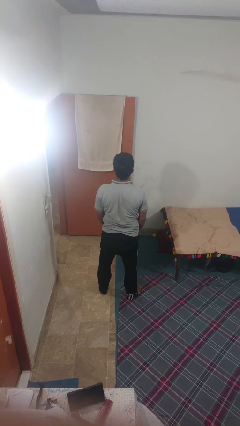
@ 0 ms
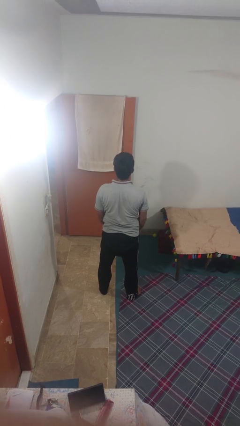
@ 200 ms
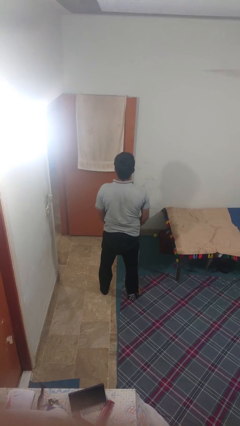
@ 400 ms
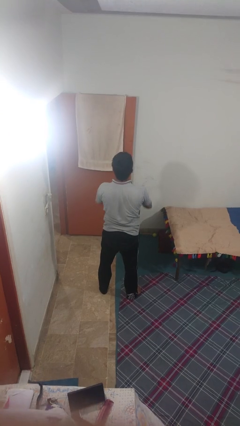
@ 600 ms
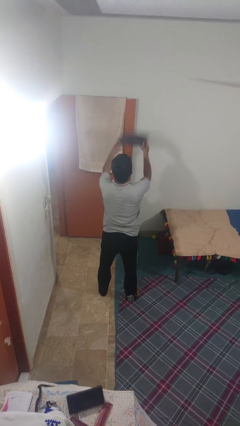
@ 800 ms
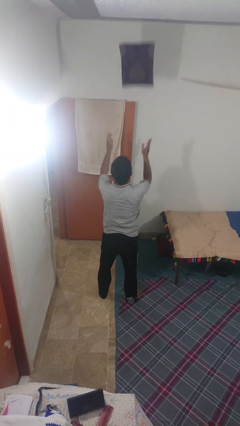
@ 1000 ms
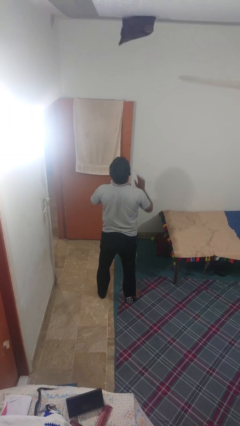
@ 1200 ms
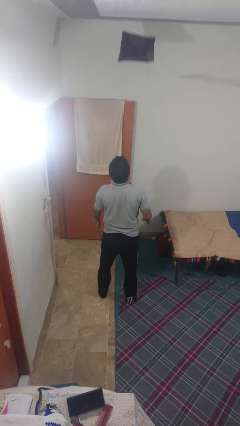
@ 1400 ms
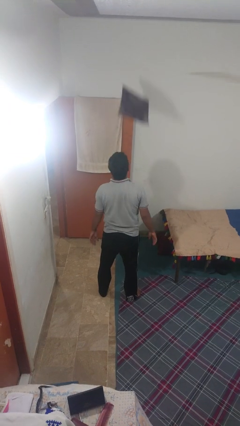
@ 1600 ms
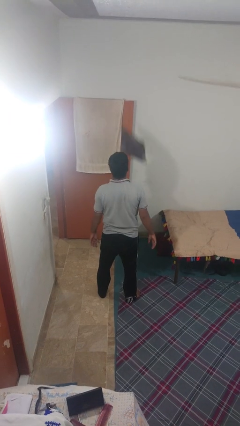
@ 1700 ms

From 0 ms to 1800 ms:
person throws object into air

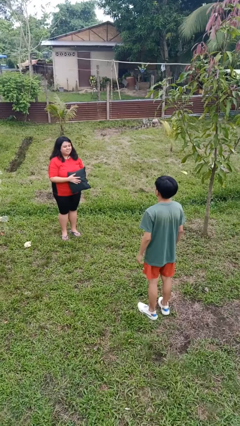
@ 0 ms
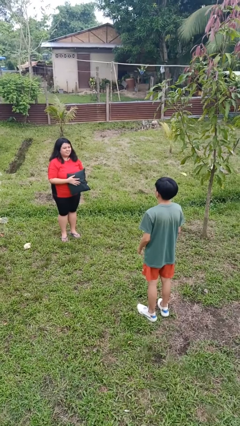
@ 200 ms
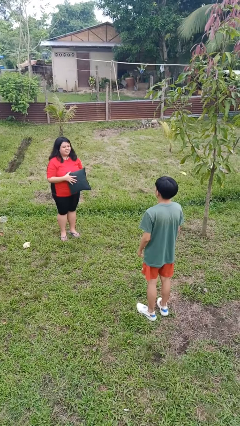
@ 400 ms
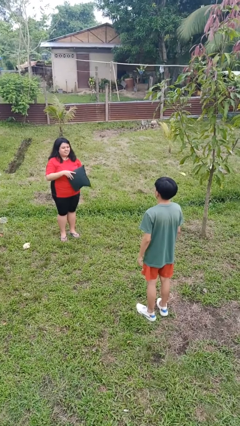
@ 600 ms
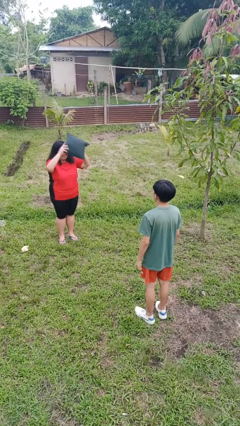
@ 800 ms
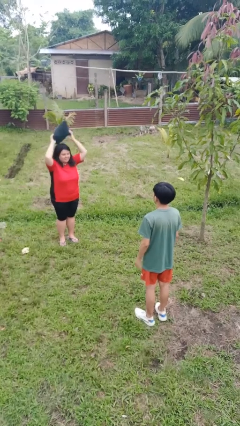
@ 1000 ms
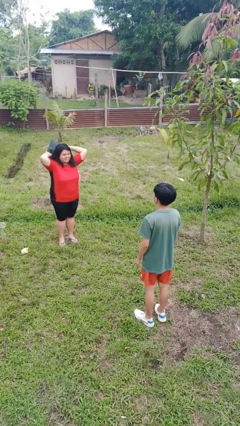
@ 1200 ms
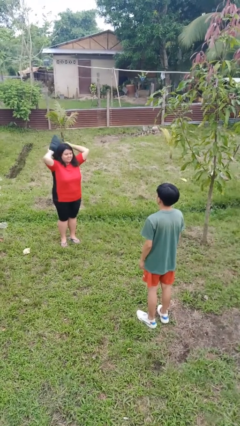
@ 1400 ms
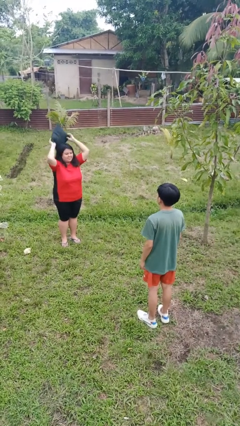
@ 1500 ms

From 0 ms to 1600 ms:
person throws object to person

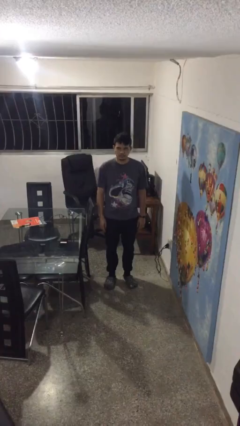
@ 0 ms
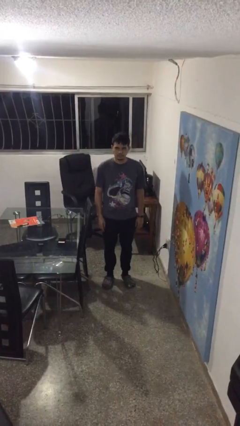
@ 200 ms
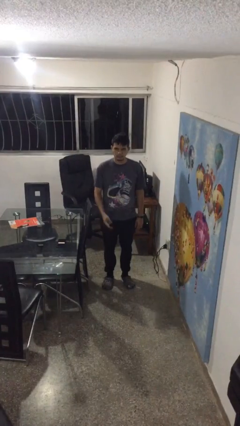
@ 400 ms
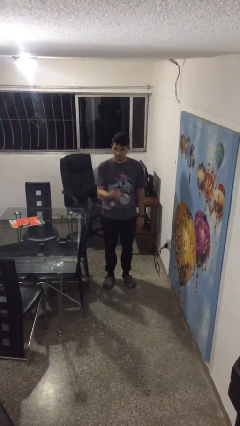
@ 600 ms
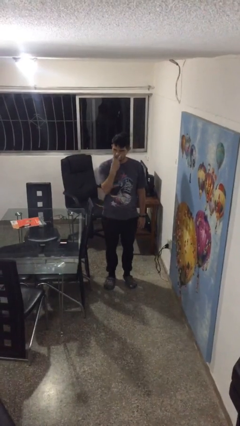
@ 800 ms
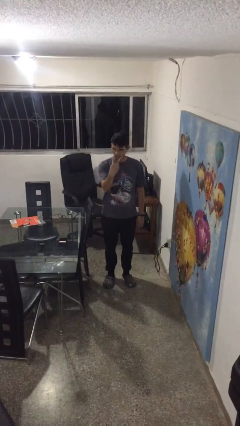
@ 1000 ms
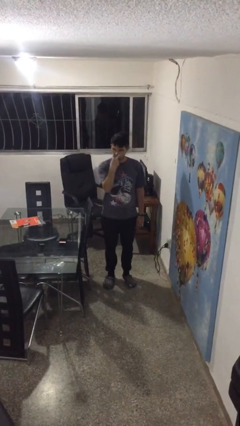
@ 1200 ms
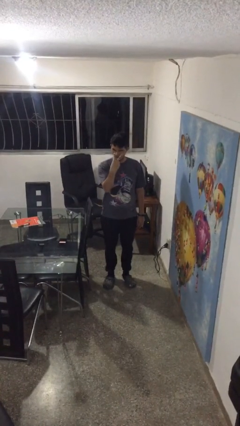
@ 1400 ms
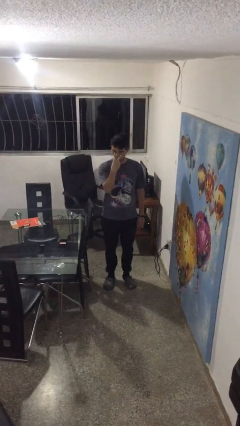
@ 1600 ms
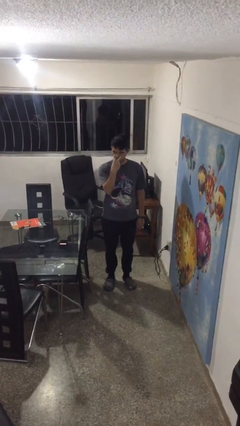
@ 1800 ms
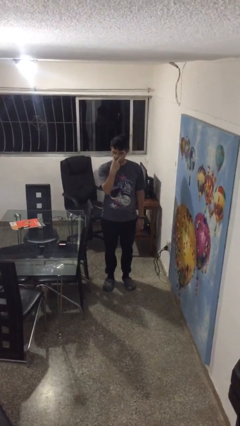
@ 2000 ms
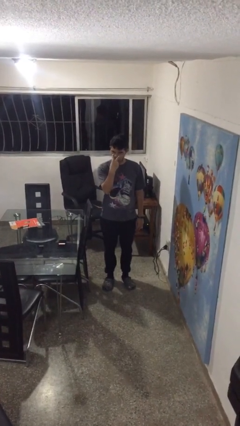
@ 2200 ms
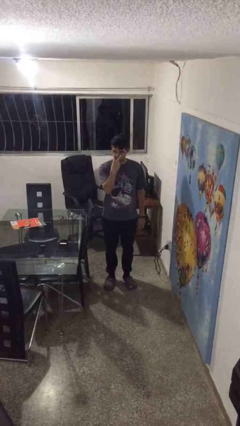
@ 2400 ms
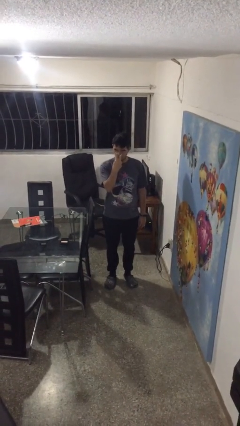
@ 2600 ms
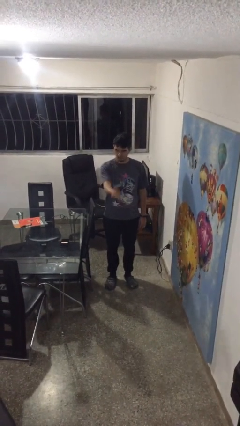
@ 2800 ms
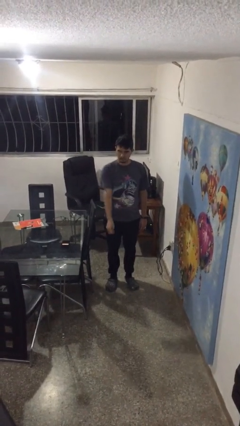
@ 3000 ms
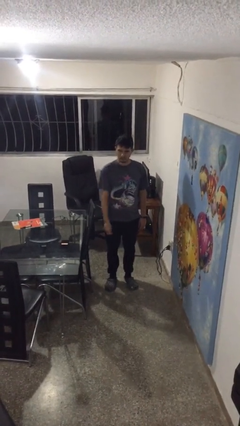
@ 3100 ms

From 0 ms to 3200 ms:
person gestures watch closely

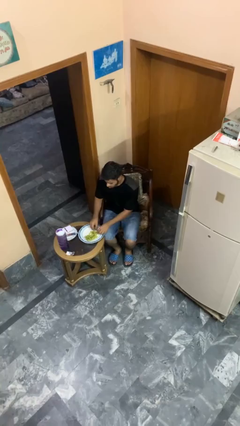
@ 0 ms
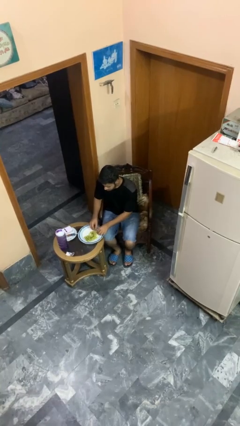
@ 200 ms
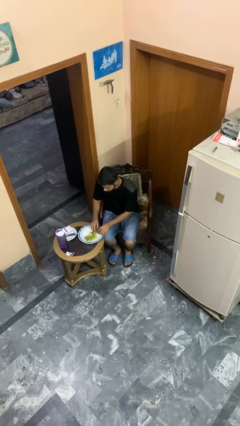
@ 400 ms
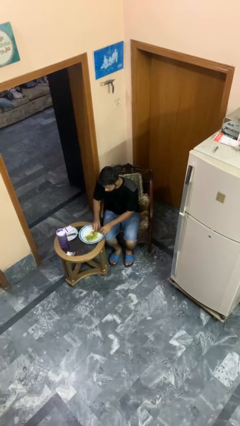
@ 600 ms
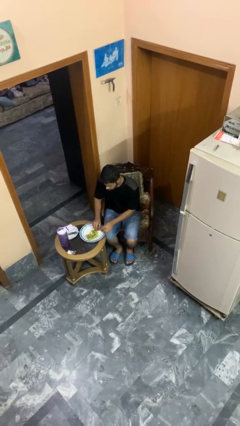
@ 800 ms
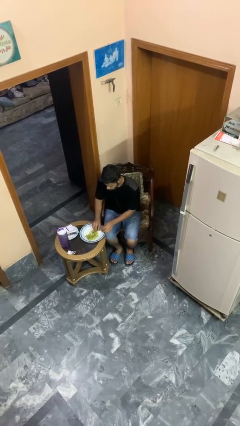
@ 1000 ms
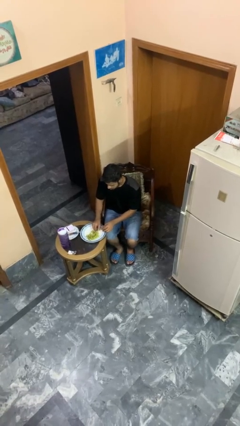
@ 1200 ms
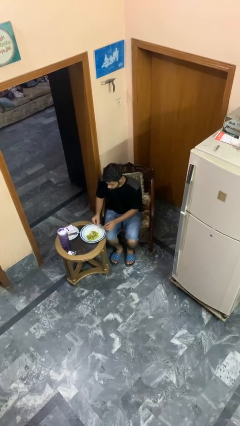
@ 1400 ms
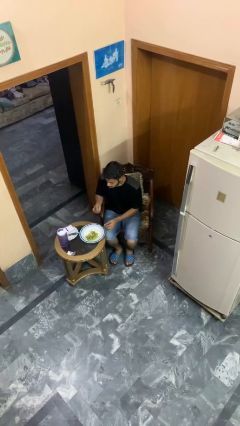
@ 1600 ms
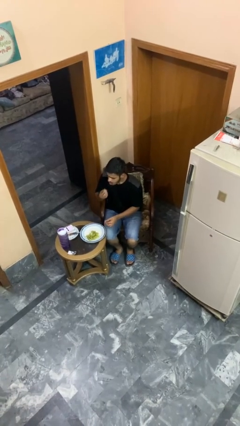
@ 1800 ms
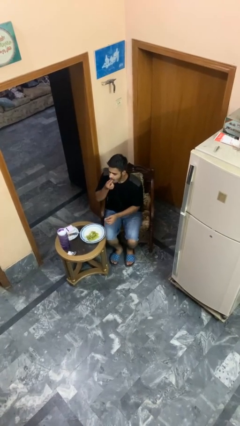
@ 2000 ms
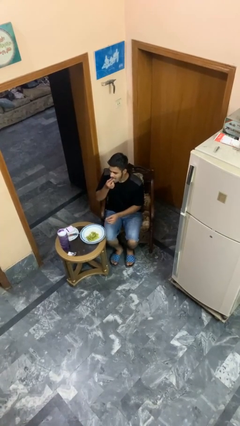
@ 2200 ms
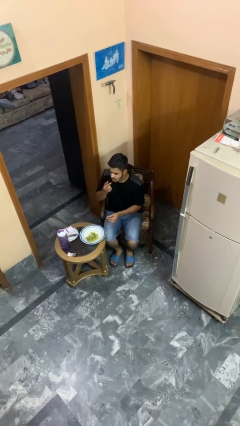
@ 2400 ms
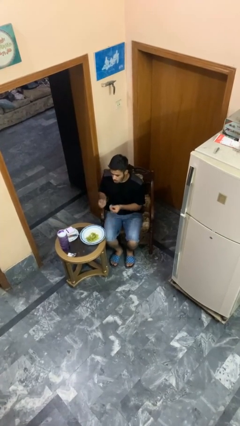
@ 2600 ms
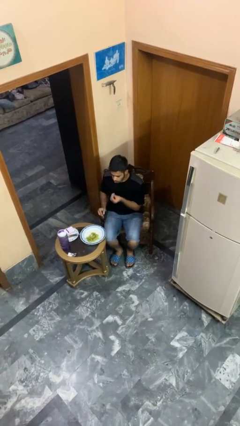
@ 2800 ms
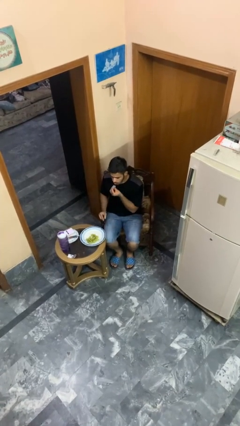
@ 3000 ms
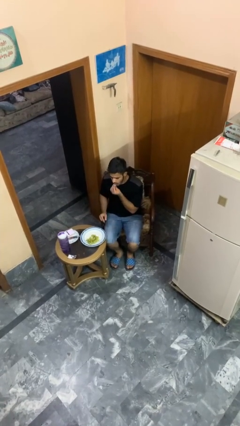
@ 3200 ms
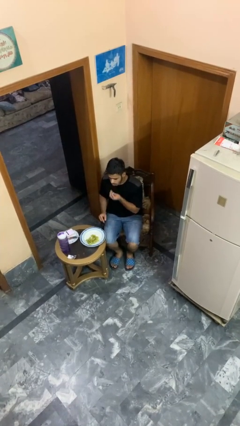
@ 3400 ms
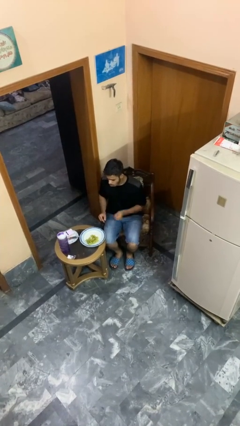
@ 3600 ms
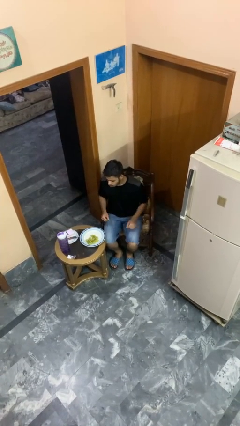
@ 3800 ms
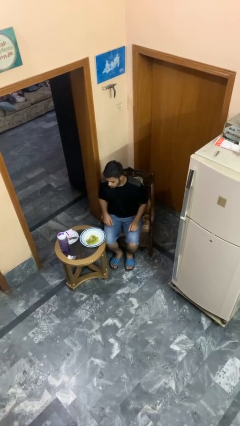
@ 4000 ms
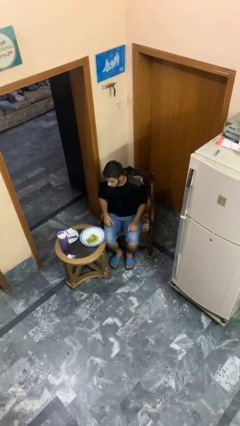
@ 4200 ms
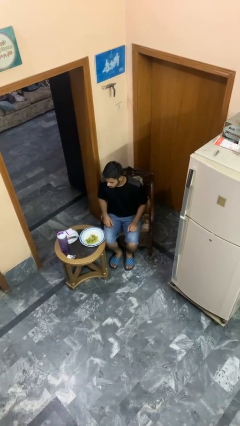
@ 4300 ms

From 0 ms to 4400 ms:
person eats with hands

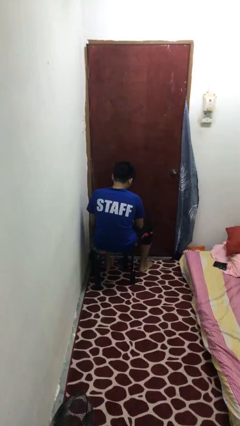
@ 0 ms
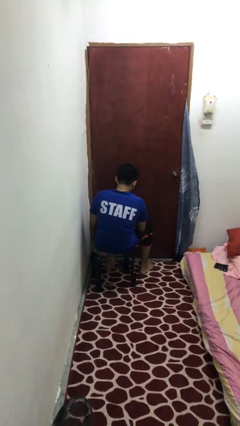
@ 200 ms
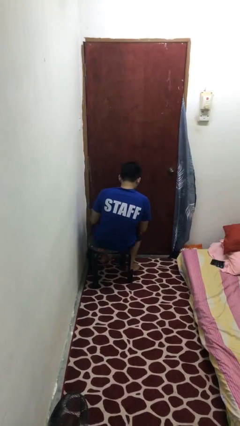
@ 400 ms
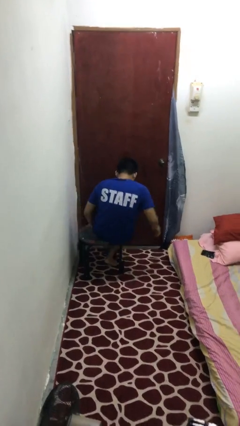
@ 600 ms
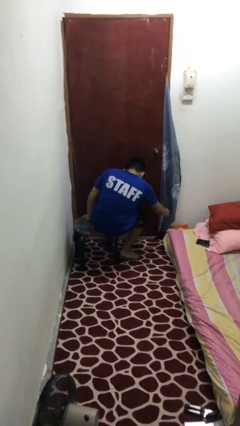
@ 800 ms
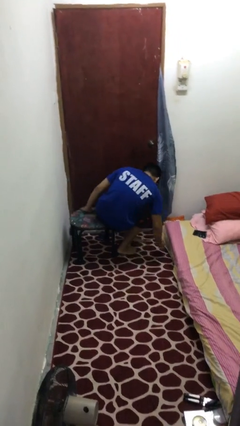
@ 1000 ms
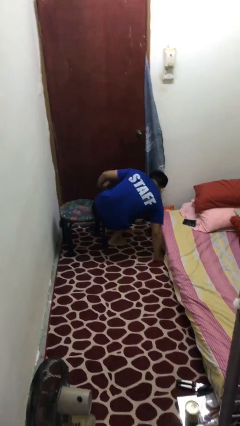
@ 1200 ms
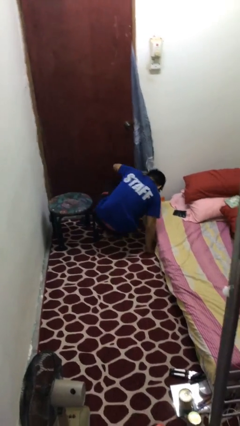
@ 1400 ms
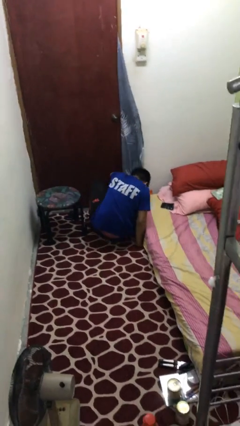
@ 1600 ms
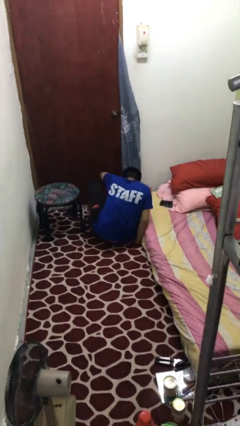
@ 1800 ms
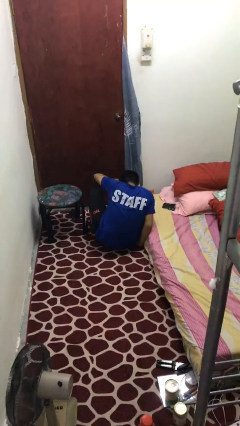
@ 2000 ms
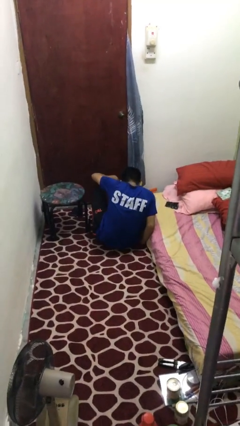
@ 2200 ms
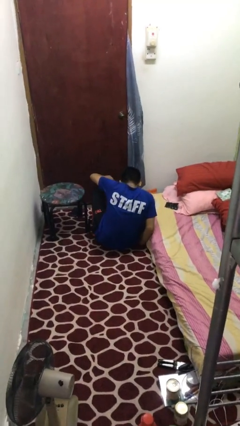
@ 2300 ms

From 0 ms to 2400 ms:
person falls from chair

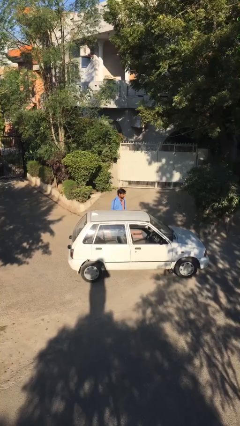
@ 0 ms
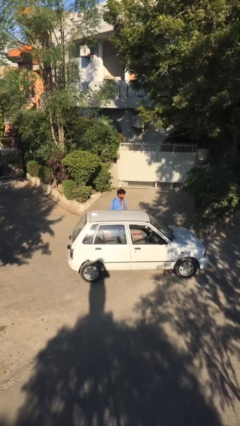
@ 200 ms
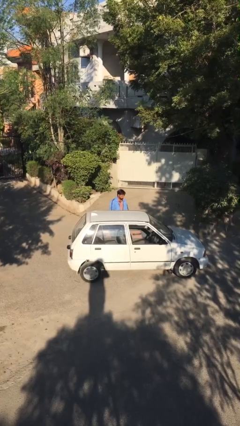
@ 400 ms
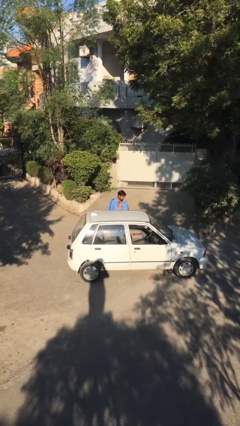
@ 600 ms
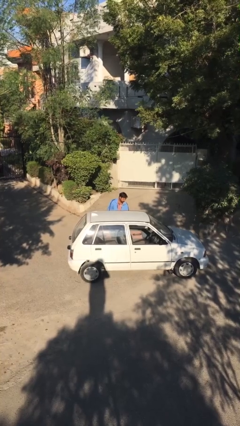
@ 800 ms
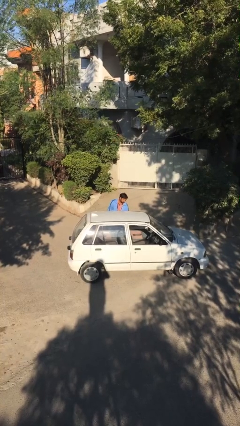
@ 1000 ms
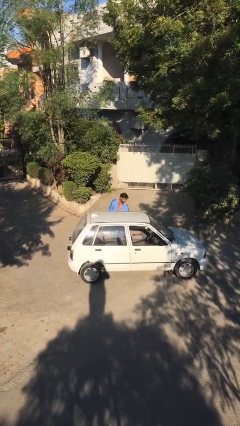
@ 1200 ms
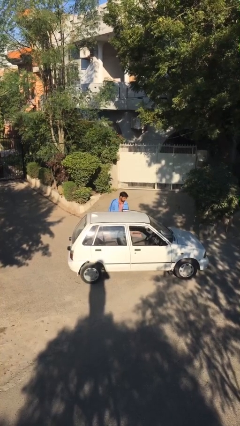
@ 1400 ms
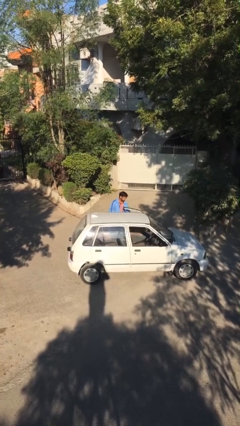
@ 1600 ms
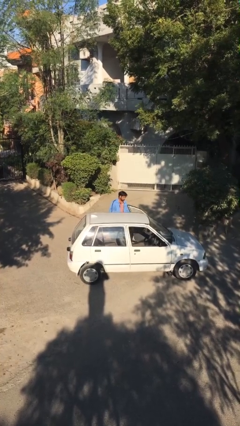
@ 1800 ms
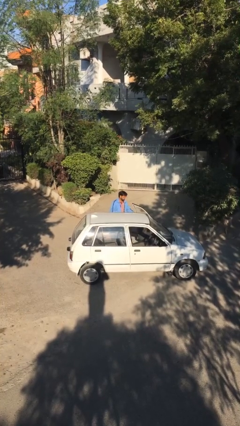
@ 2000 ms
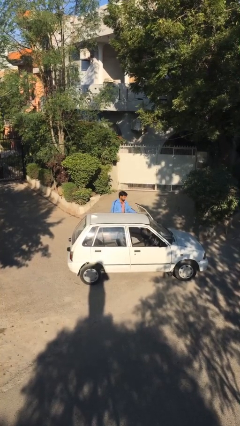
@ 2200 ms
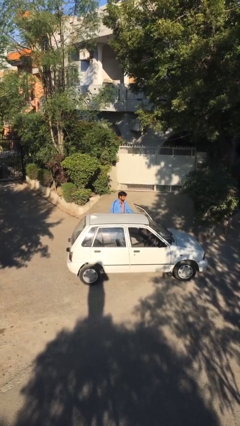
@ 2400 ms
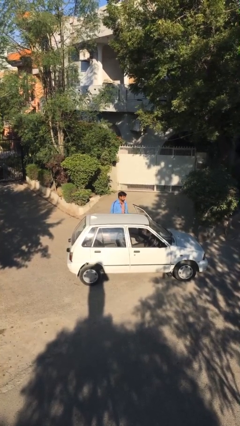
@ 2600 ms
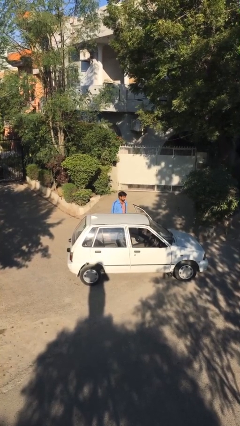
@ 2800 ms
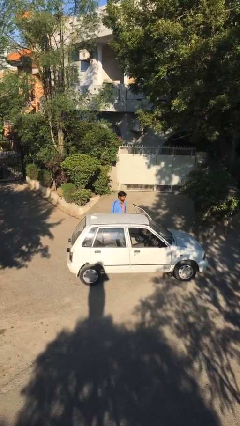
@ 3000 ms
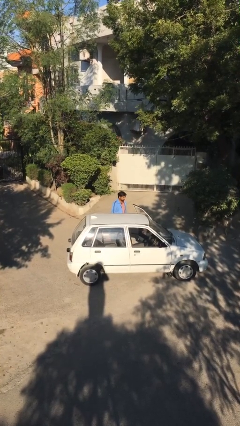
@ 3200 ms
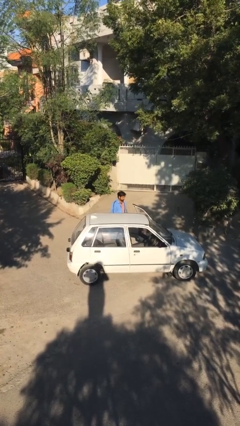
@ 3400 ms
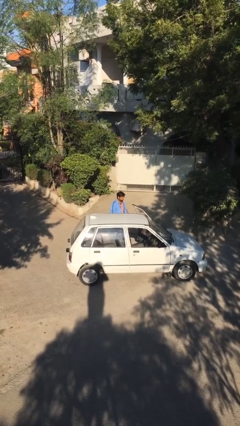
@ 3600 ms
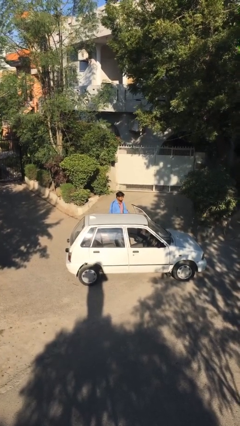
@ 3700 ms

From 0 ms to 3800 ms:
person opens car door

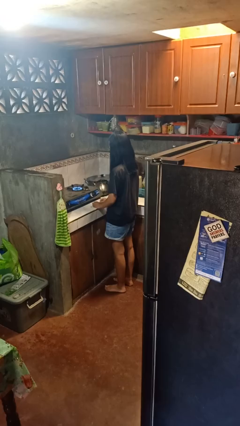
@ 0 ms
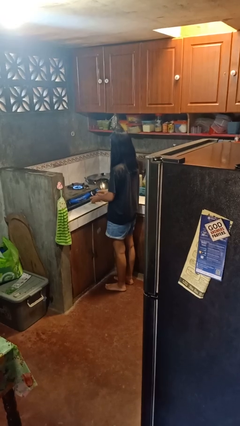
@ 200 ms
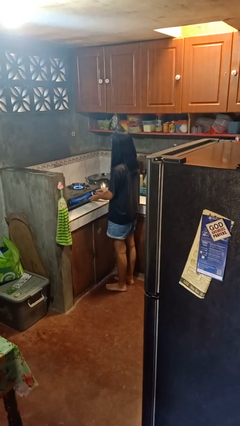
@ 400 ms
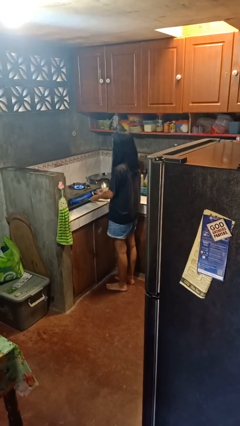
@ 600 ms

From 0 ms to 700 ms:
person turns off stovetop
